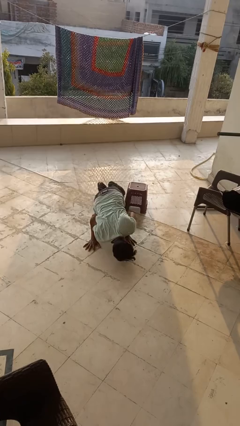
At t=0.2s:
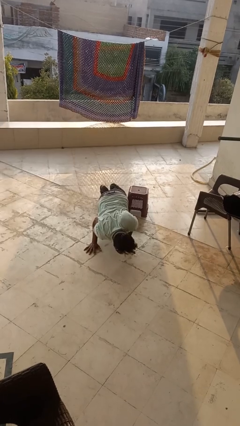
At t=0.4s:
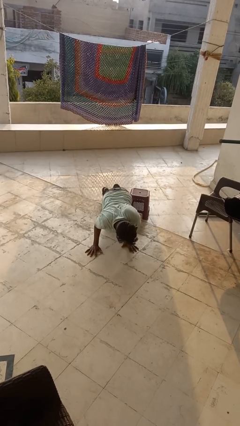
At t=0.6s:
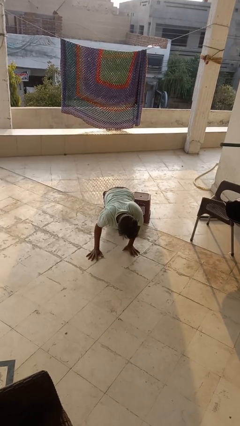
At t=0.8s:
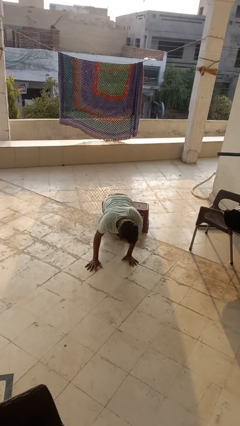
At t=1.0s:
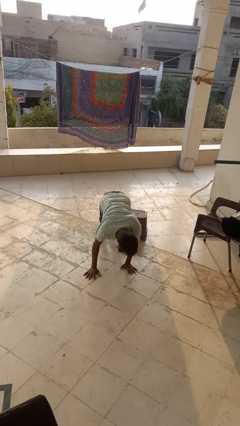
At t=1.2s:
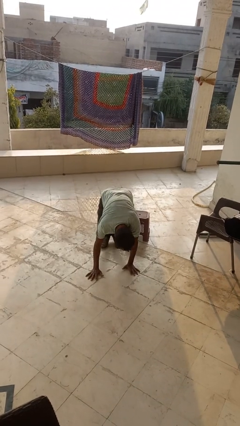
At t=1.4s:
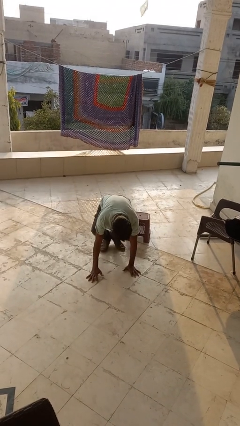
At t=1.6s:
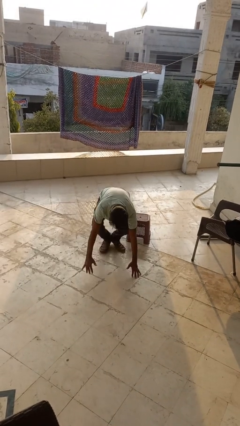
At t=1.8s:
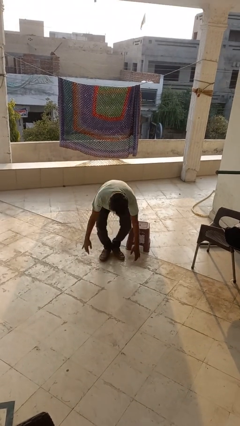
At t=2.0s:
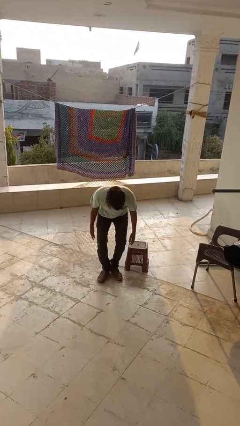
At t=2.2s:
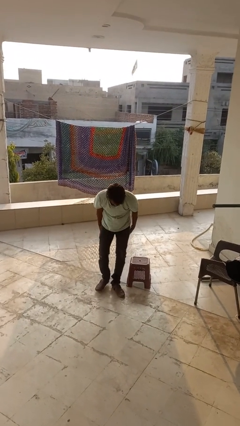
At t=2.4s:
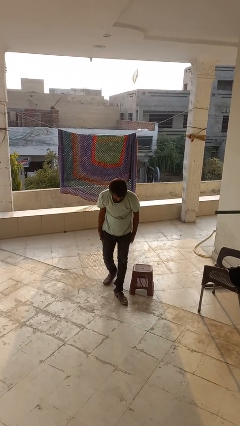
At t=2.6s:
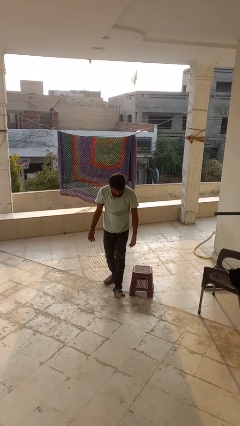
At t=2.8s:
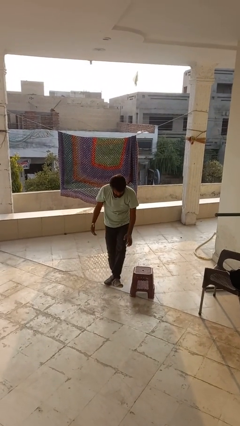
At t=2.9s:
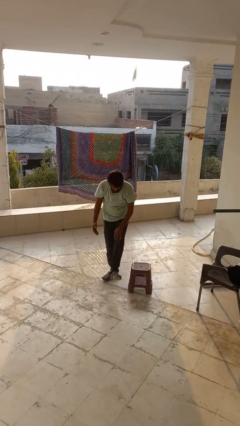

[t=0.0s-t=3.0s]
person stands up from floor

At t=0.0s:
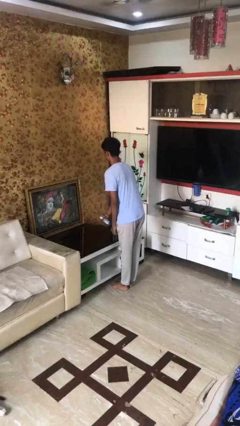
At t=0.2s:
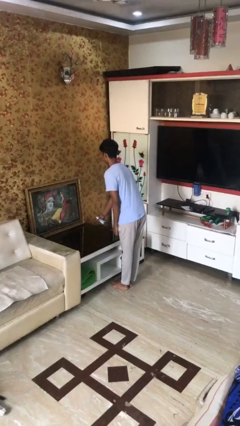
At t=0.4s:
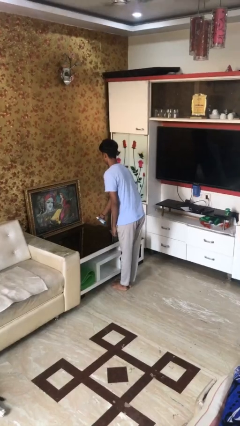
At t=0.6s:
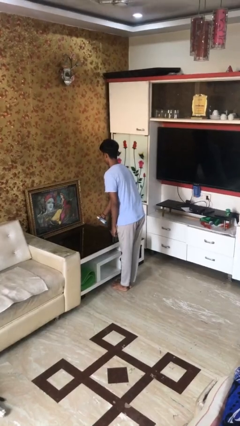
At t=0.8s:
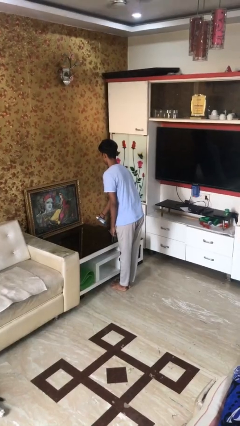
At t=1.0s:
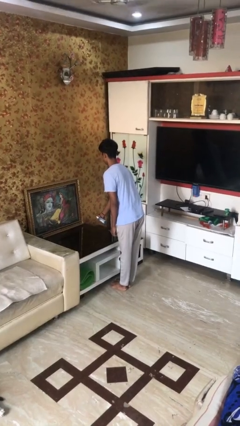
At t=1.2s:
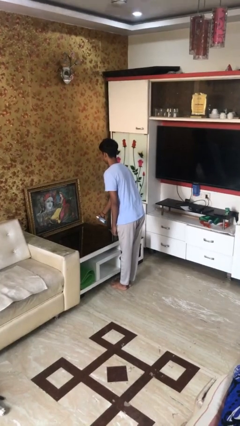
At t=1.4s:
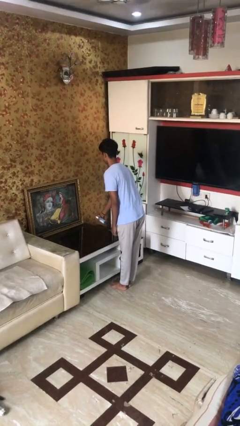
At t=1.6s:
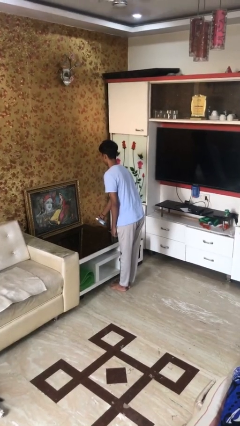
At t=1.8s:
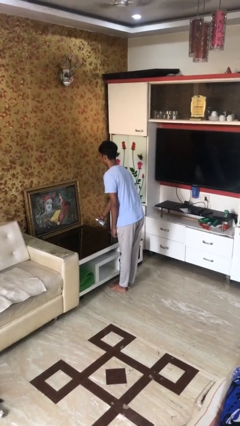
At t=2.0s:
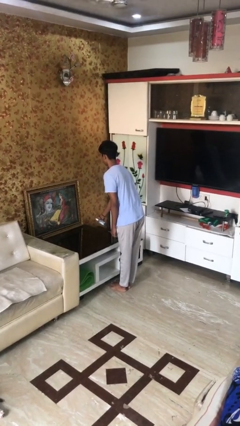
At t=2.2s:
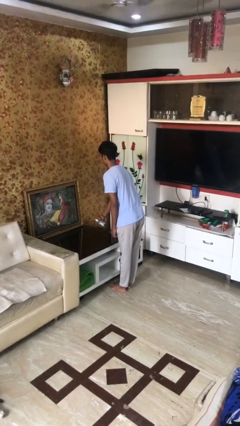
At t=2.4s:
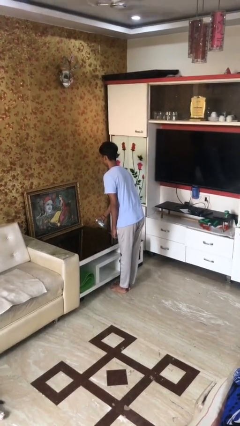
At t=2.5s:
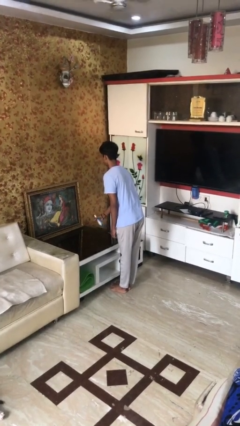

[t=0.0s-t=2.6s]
person sprays from bottle

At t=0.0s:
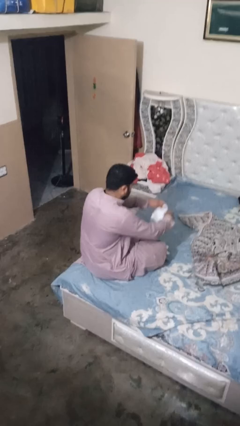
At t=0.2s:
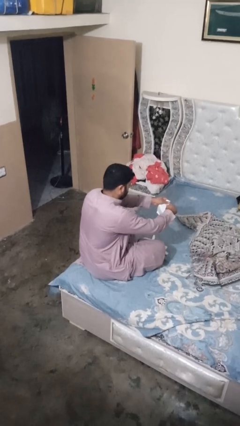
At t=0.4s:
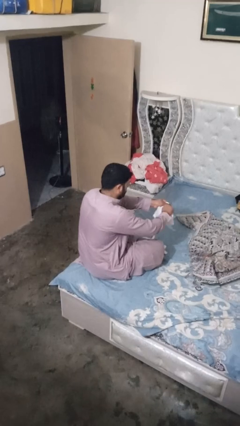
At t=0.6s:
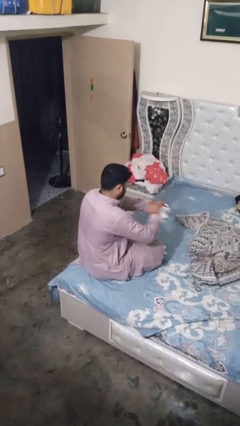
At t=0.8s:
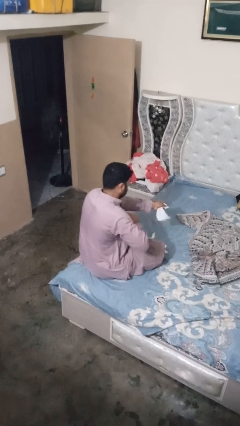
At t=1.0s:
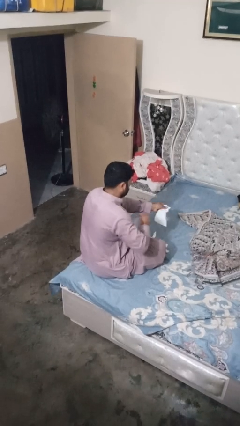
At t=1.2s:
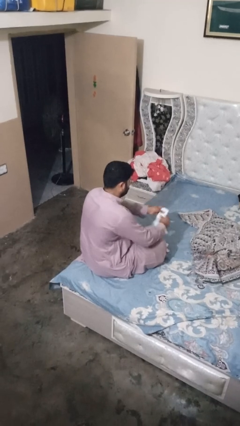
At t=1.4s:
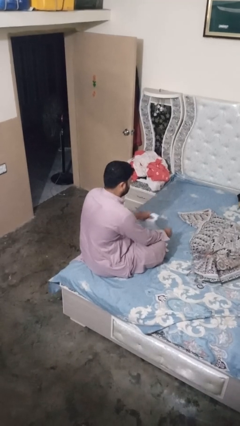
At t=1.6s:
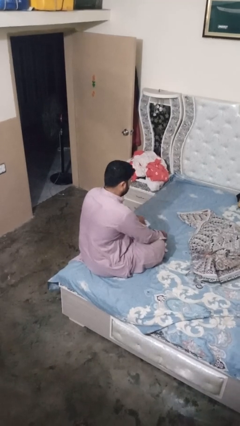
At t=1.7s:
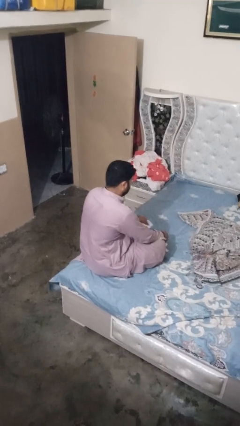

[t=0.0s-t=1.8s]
person tears paper

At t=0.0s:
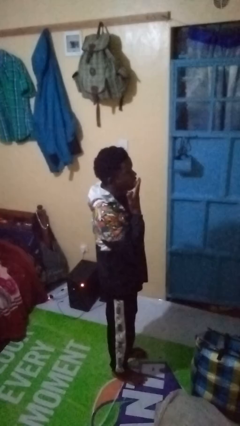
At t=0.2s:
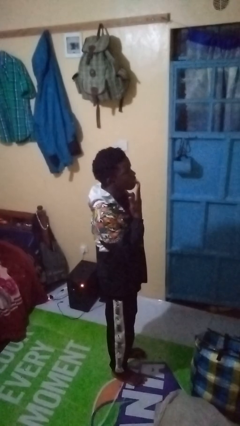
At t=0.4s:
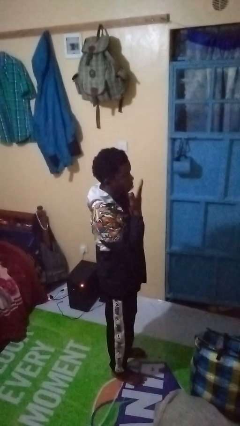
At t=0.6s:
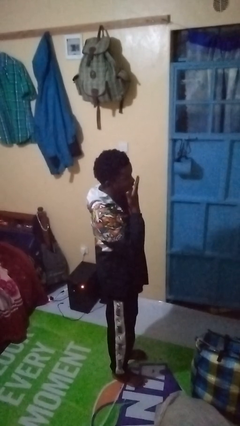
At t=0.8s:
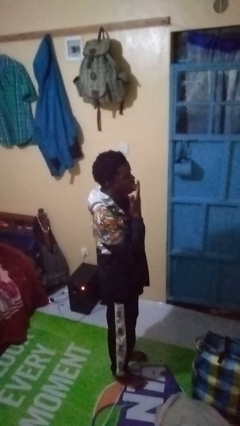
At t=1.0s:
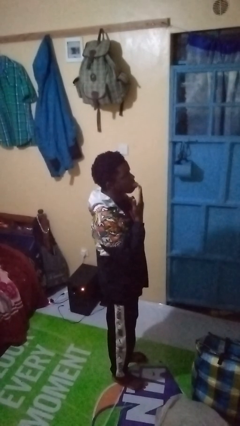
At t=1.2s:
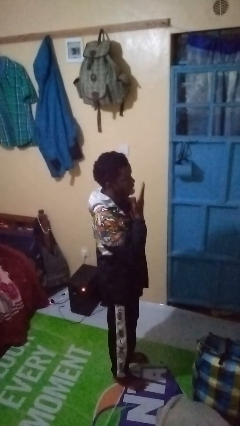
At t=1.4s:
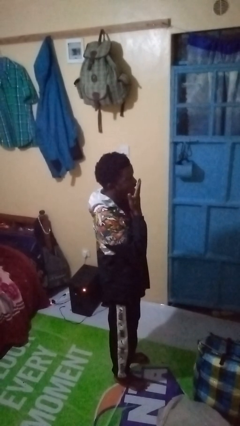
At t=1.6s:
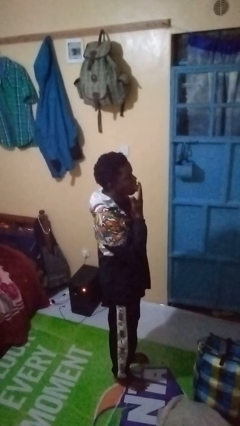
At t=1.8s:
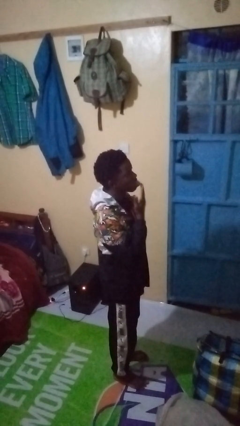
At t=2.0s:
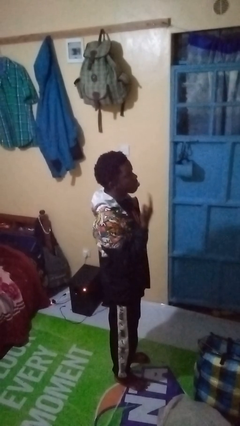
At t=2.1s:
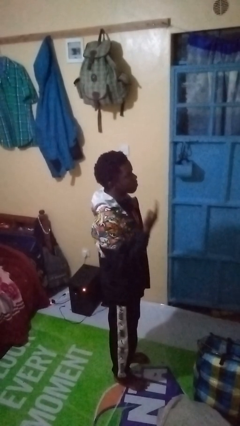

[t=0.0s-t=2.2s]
person licks fingers

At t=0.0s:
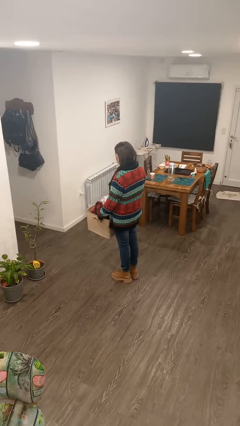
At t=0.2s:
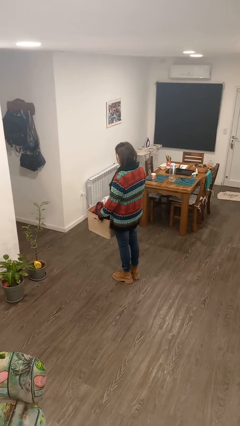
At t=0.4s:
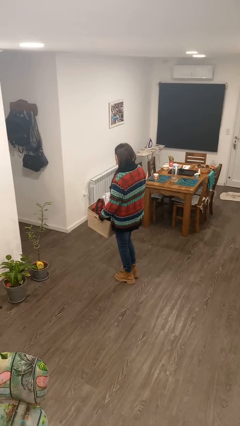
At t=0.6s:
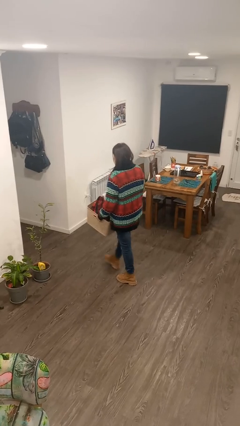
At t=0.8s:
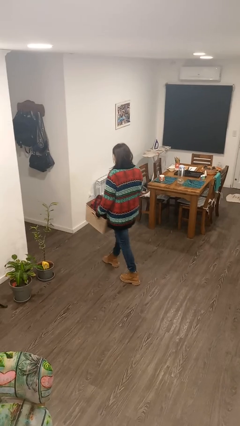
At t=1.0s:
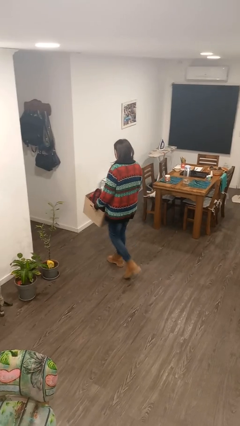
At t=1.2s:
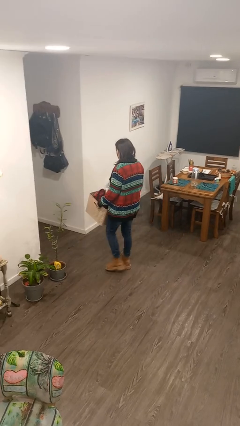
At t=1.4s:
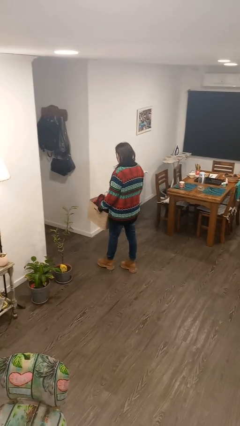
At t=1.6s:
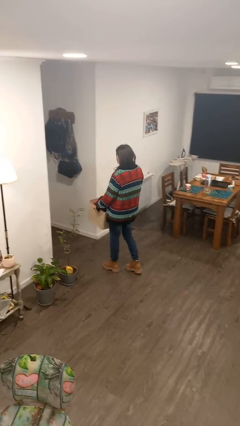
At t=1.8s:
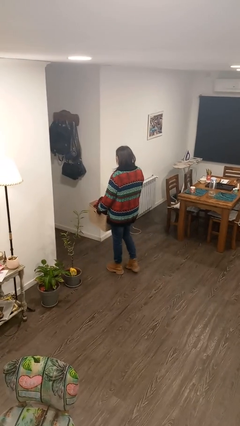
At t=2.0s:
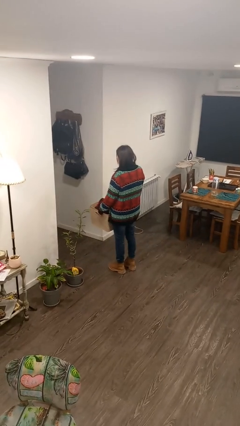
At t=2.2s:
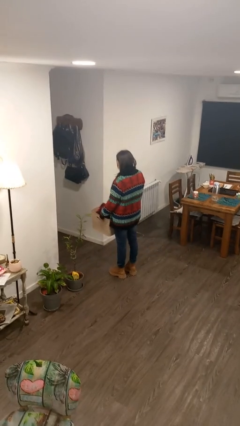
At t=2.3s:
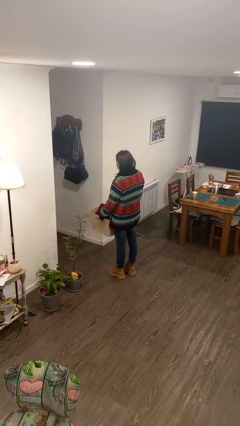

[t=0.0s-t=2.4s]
person carries laundry basket

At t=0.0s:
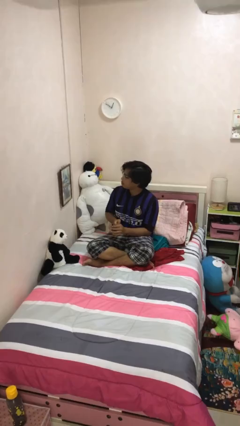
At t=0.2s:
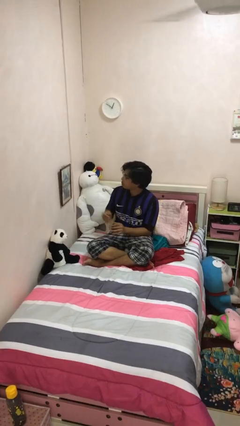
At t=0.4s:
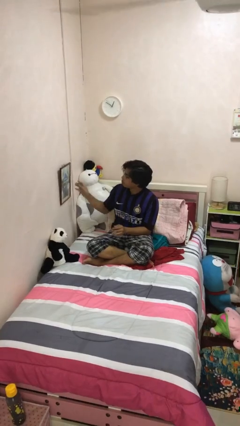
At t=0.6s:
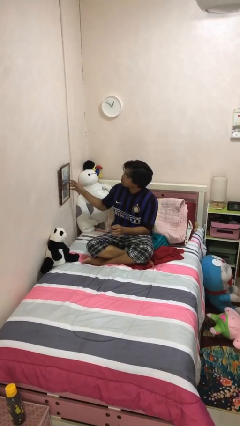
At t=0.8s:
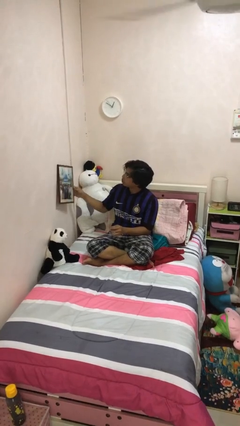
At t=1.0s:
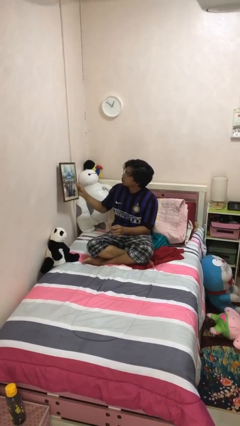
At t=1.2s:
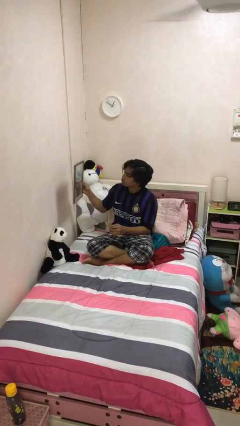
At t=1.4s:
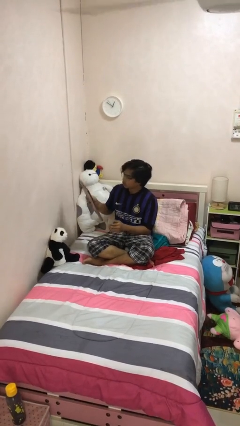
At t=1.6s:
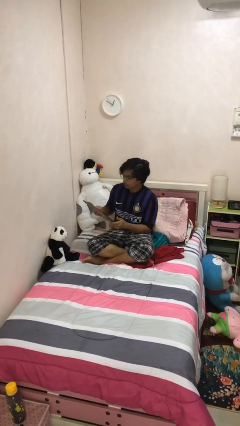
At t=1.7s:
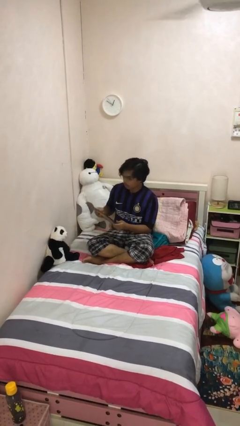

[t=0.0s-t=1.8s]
person takes down picture frame

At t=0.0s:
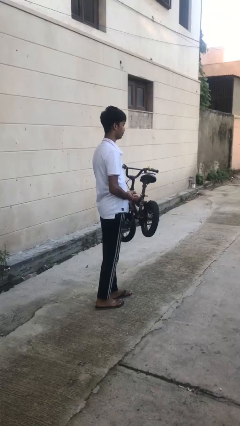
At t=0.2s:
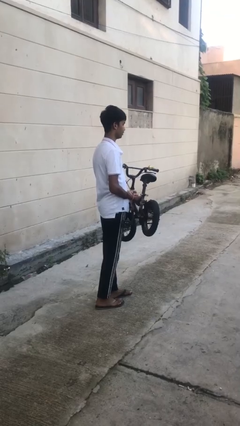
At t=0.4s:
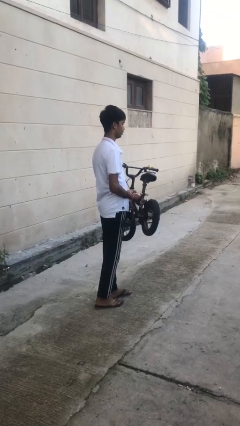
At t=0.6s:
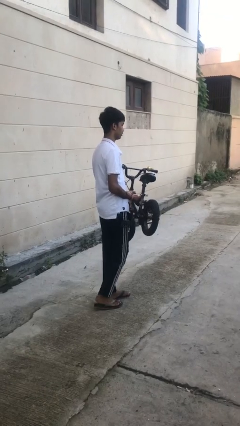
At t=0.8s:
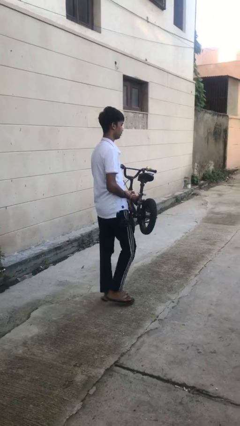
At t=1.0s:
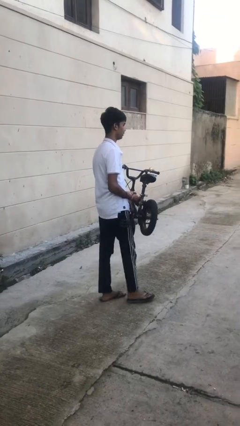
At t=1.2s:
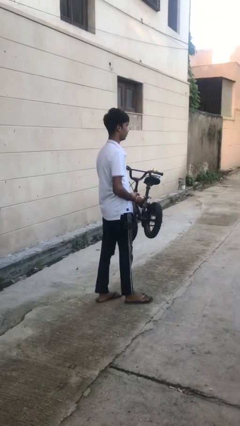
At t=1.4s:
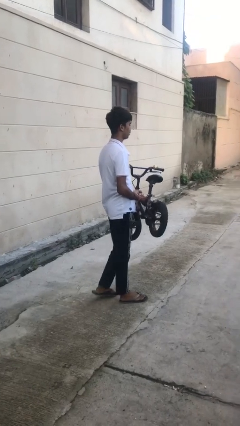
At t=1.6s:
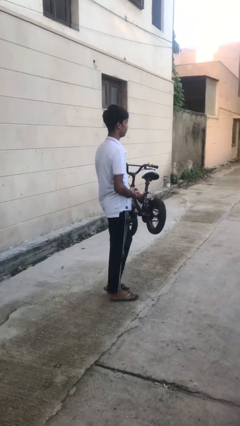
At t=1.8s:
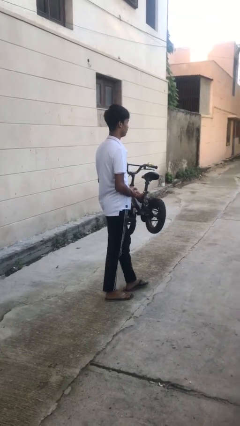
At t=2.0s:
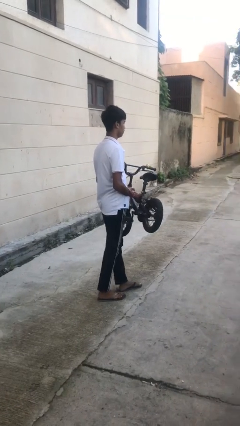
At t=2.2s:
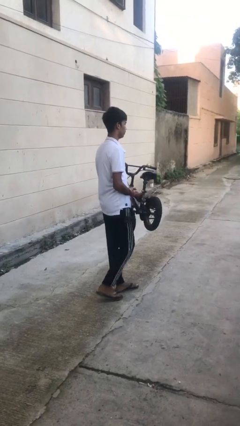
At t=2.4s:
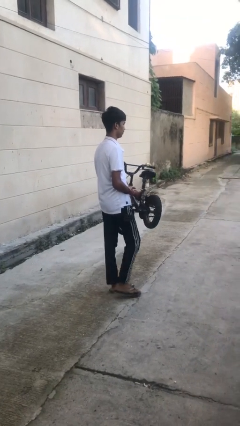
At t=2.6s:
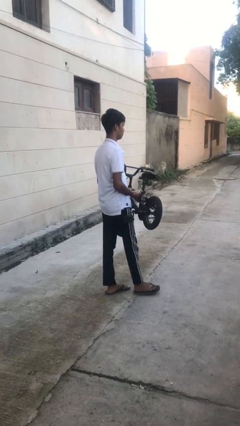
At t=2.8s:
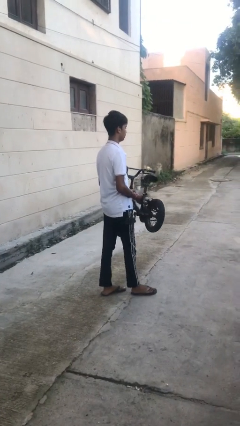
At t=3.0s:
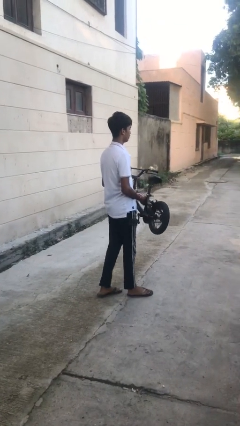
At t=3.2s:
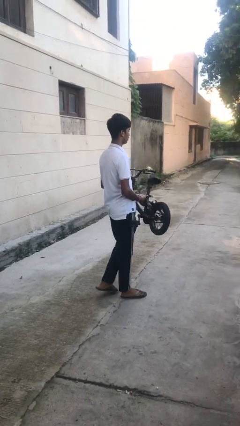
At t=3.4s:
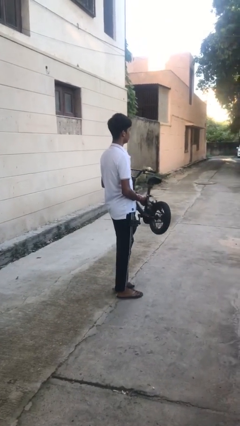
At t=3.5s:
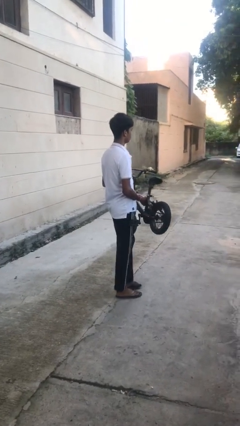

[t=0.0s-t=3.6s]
person carries bicycle
